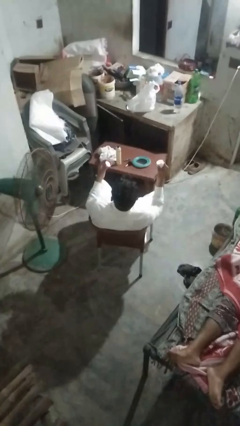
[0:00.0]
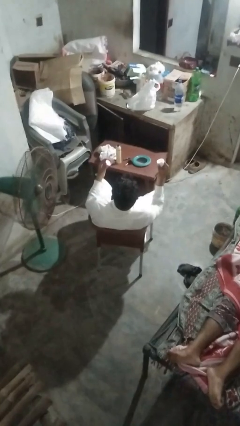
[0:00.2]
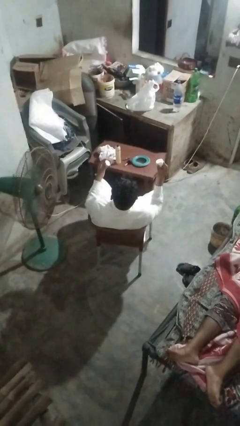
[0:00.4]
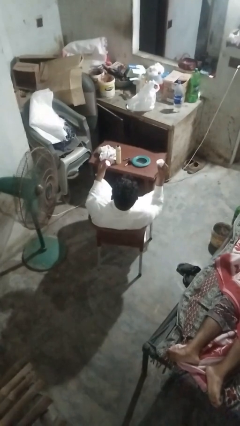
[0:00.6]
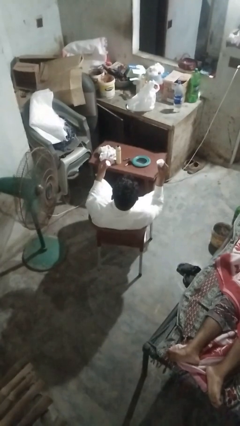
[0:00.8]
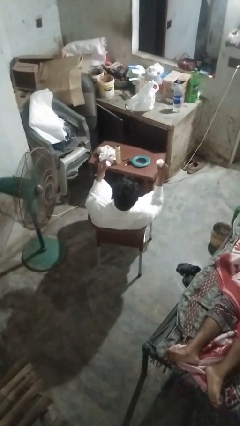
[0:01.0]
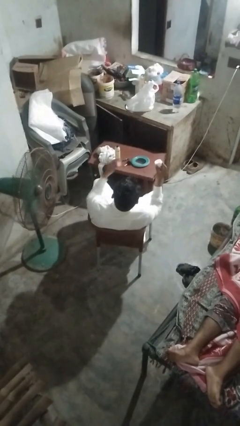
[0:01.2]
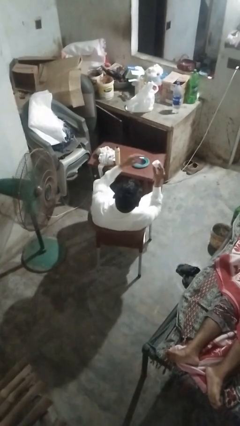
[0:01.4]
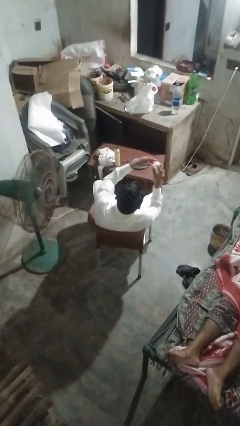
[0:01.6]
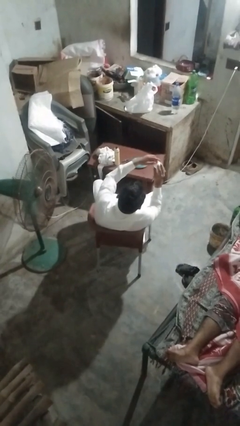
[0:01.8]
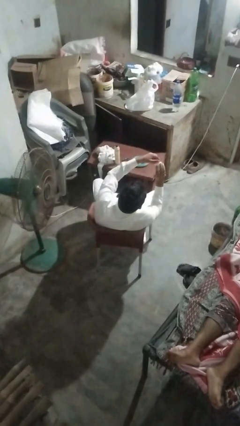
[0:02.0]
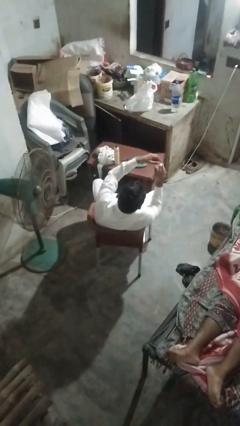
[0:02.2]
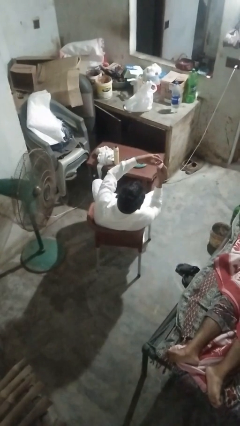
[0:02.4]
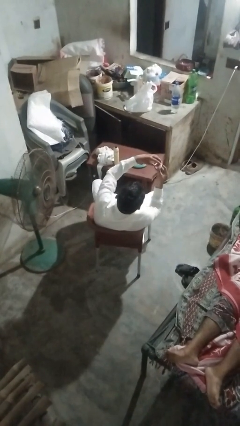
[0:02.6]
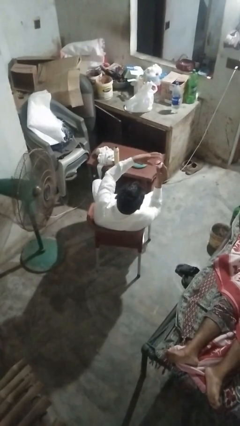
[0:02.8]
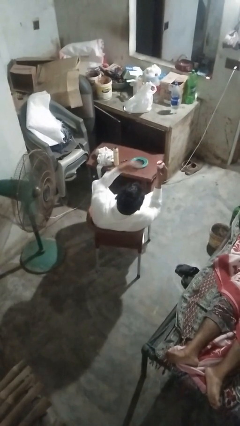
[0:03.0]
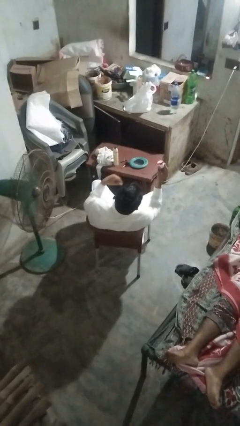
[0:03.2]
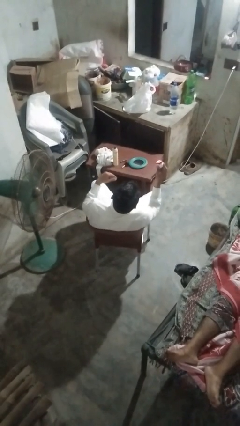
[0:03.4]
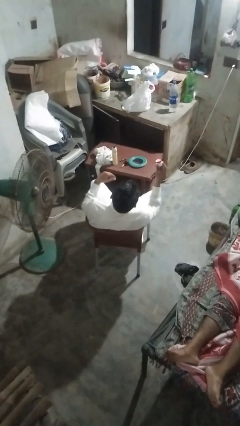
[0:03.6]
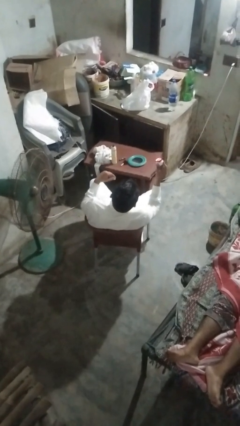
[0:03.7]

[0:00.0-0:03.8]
person closes jar

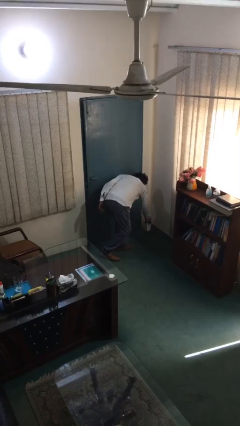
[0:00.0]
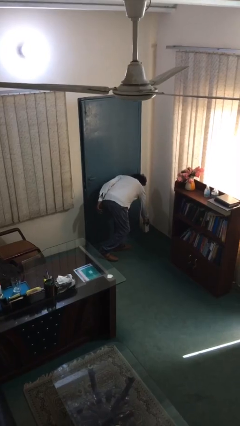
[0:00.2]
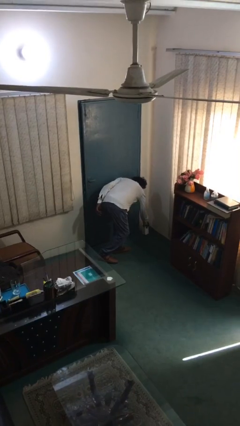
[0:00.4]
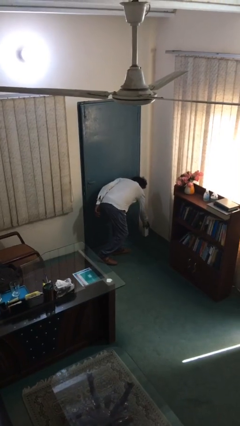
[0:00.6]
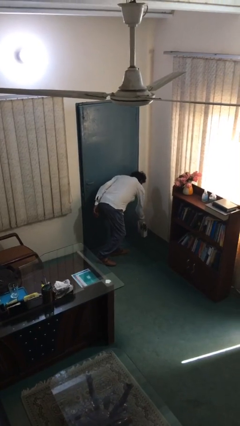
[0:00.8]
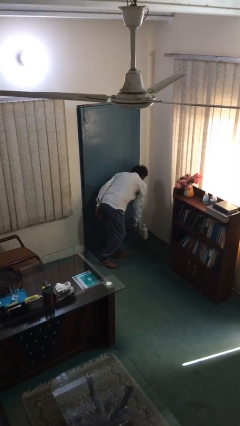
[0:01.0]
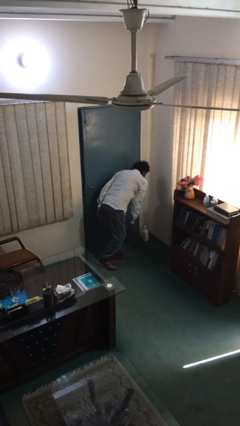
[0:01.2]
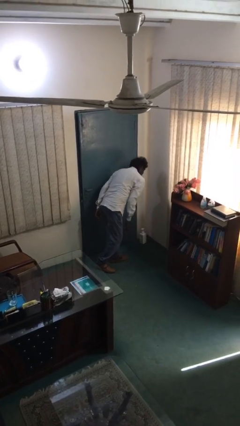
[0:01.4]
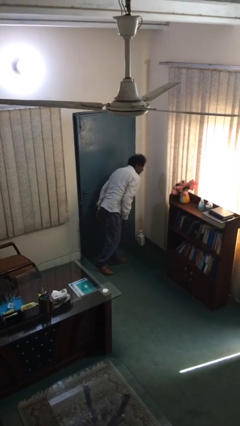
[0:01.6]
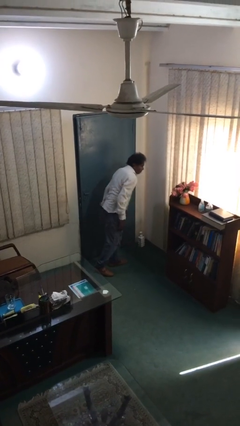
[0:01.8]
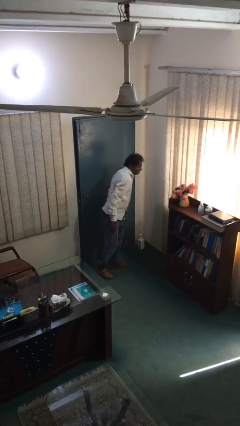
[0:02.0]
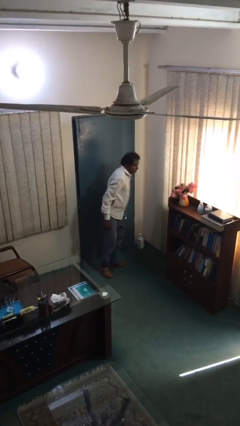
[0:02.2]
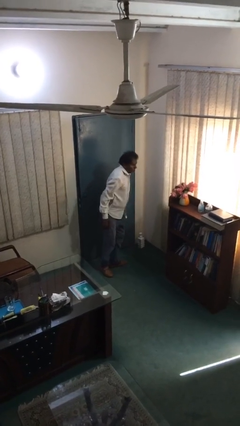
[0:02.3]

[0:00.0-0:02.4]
person puts down object on floor

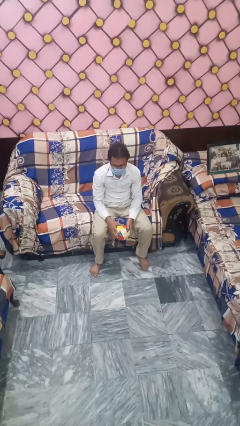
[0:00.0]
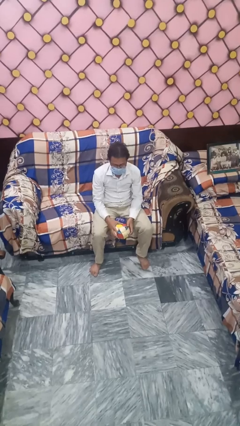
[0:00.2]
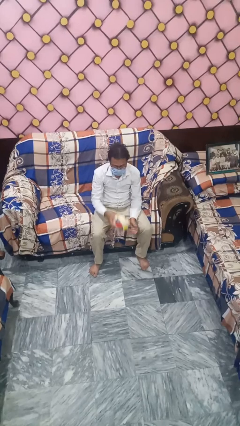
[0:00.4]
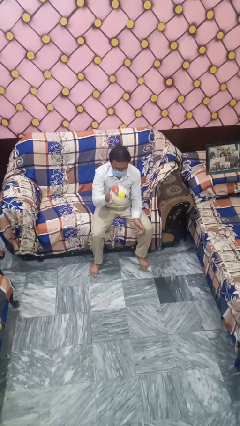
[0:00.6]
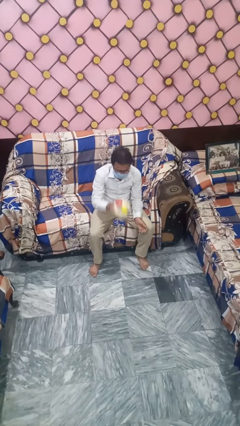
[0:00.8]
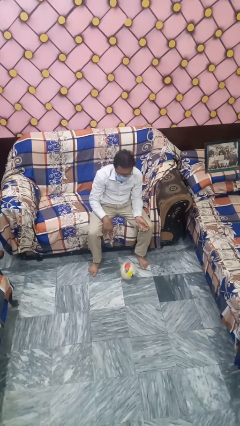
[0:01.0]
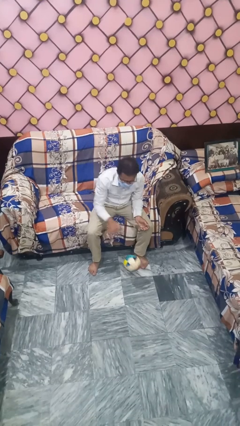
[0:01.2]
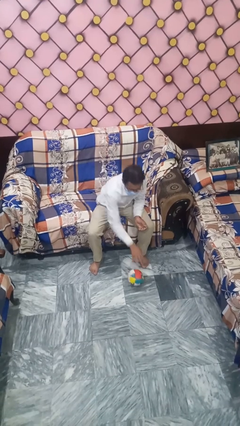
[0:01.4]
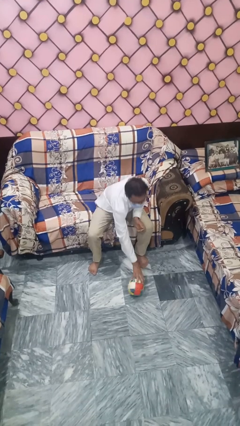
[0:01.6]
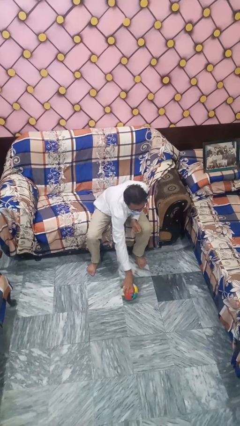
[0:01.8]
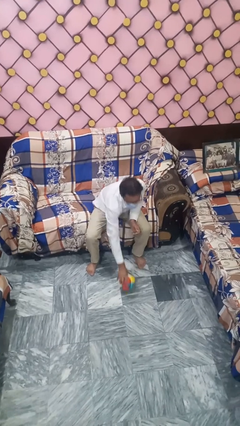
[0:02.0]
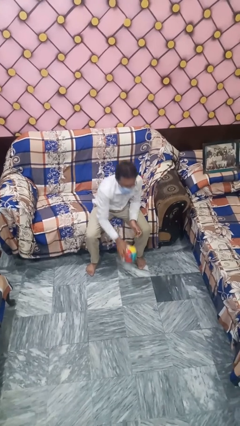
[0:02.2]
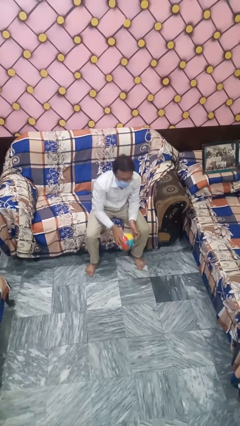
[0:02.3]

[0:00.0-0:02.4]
person bounces ball on floor

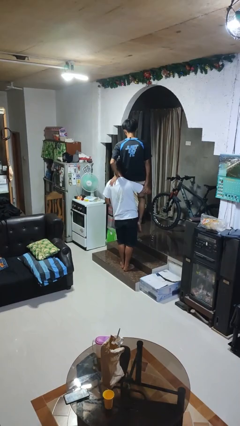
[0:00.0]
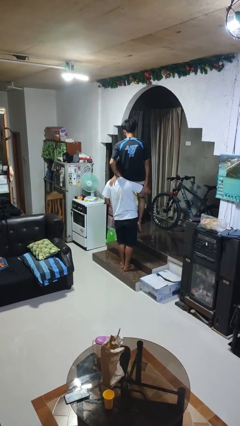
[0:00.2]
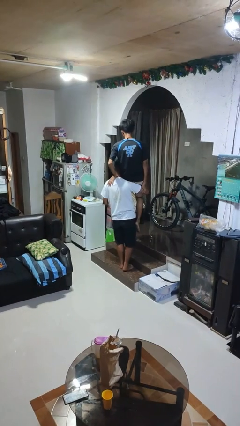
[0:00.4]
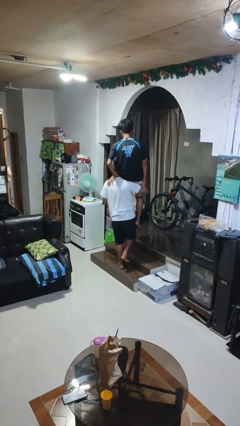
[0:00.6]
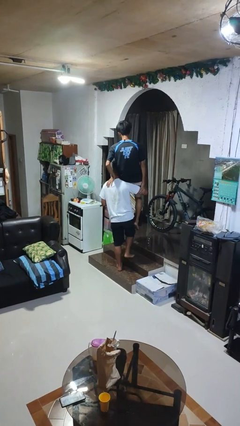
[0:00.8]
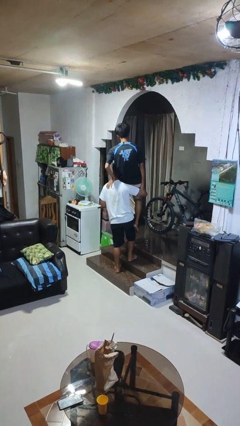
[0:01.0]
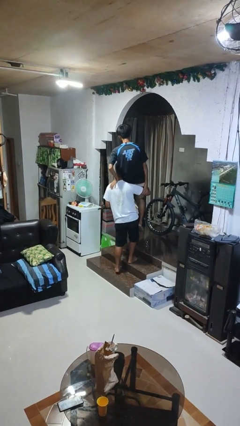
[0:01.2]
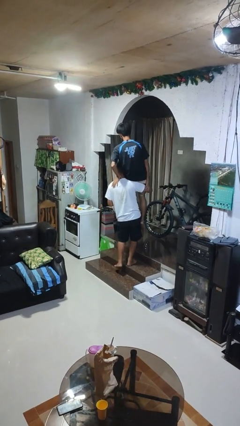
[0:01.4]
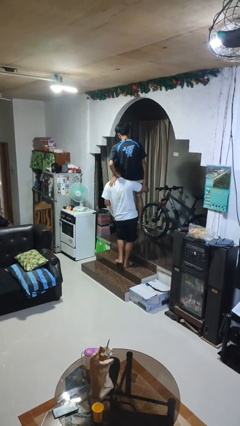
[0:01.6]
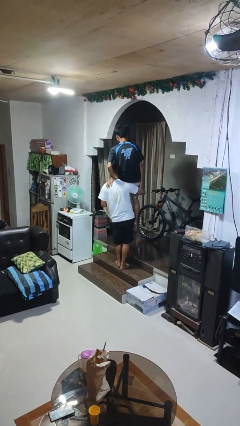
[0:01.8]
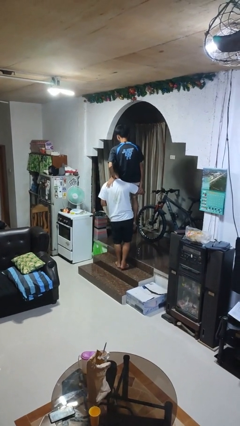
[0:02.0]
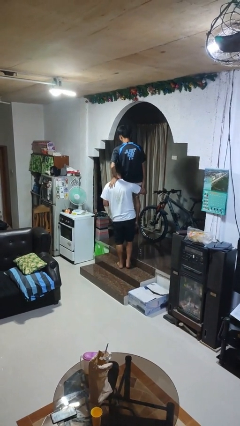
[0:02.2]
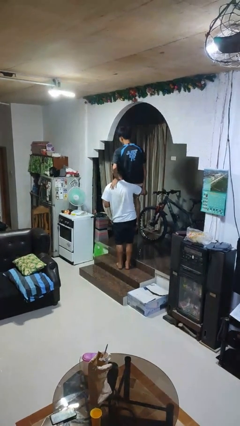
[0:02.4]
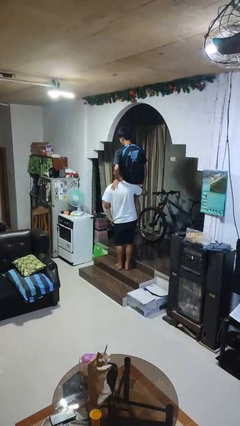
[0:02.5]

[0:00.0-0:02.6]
person carries person on shoulders

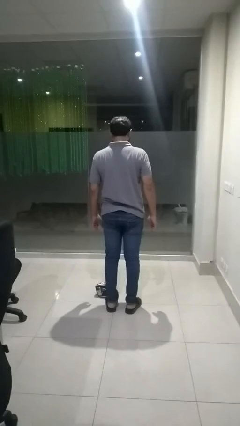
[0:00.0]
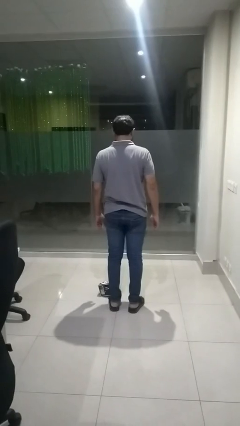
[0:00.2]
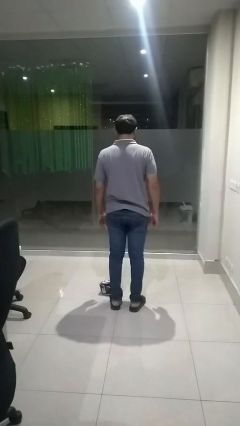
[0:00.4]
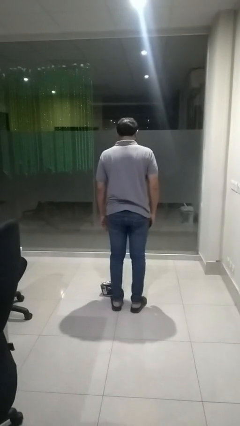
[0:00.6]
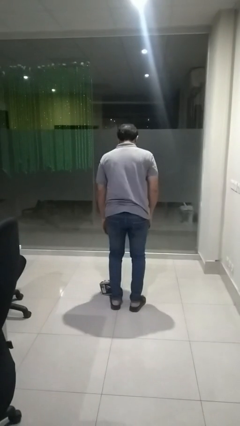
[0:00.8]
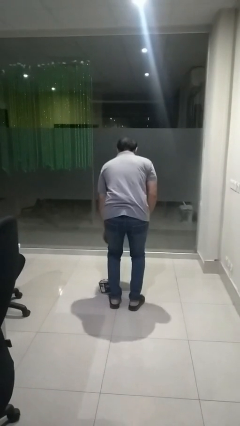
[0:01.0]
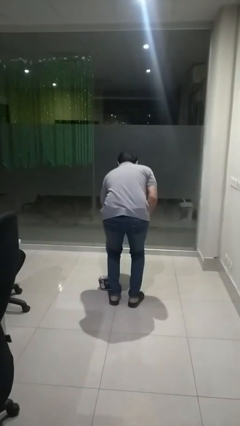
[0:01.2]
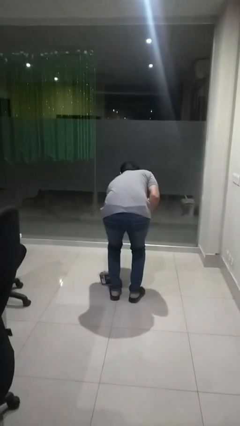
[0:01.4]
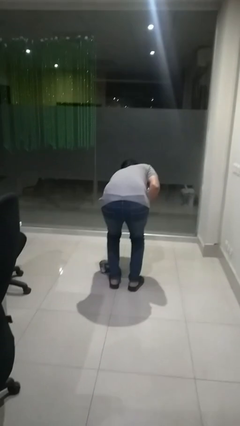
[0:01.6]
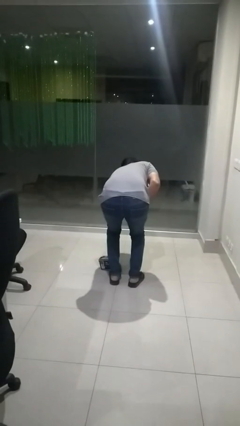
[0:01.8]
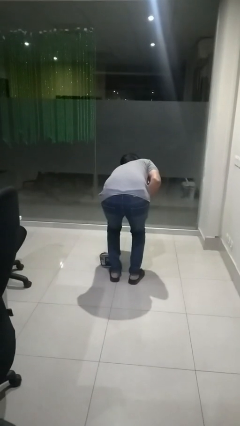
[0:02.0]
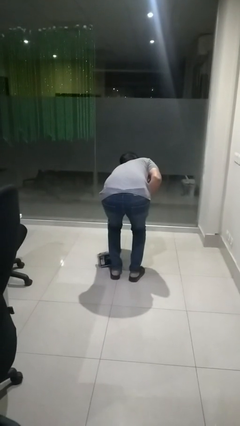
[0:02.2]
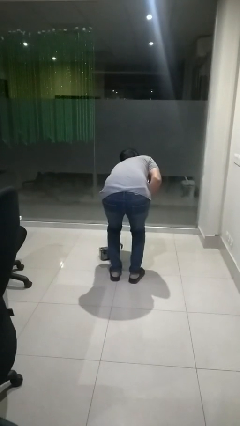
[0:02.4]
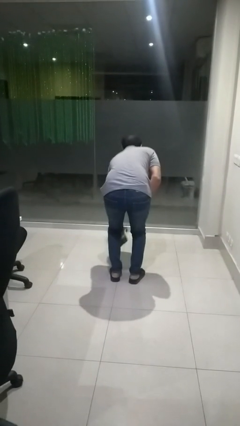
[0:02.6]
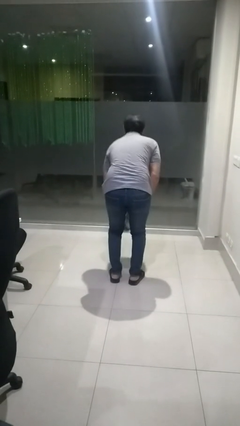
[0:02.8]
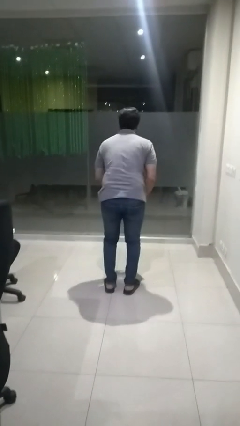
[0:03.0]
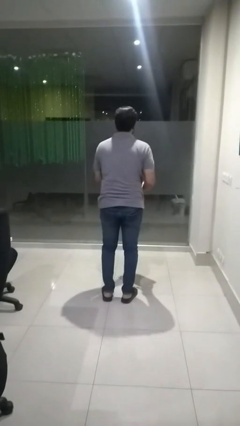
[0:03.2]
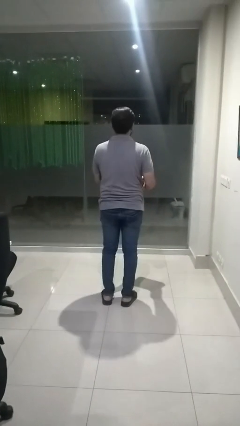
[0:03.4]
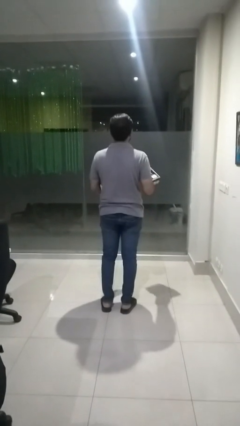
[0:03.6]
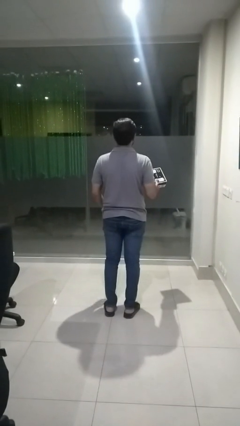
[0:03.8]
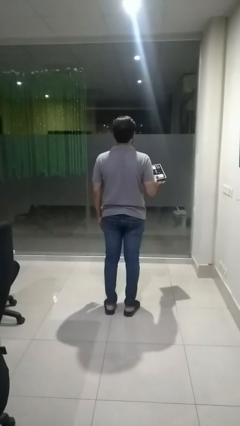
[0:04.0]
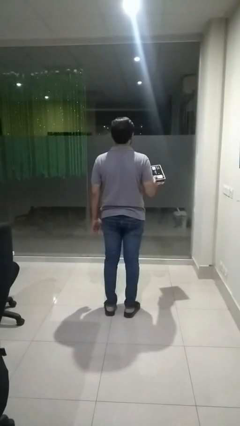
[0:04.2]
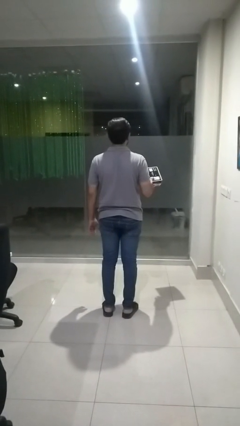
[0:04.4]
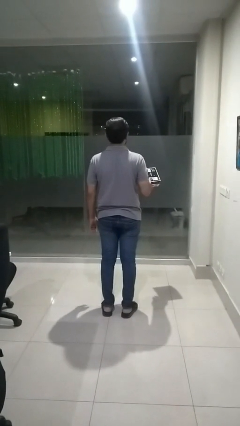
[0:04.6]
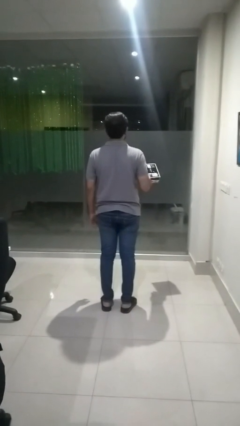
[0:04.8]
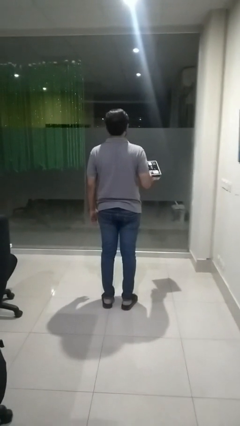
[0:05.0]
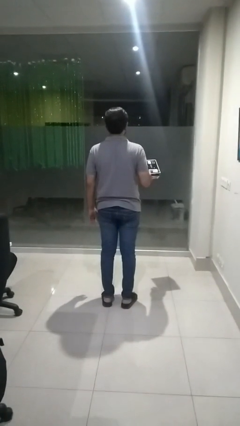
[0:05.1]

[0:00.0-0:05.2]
person picks up object from floor

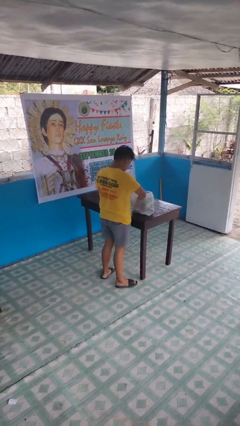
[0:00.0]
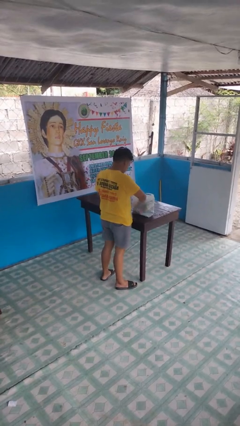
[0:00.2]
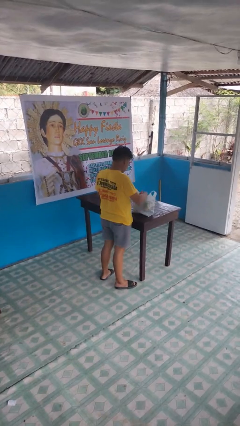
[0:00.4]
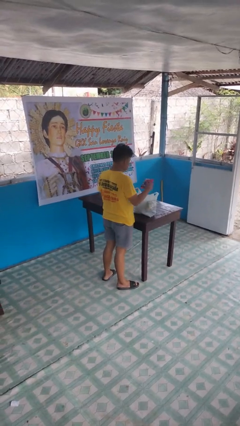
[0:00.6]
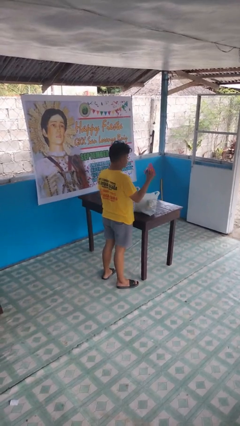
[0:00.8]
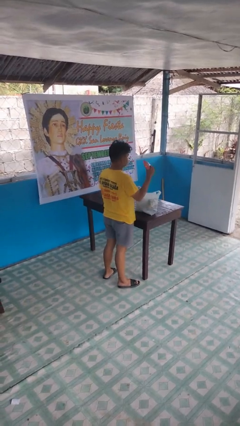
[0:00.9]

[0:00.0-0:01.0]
person takes object from bag
